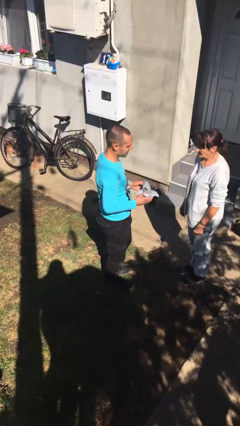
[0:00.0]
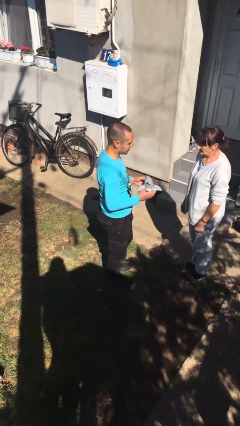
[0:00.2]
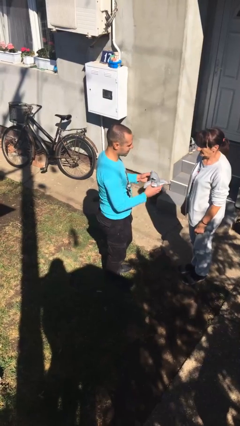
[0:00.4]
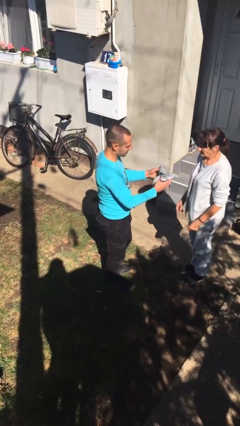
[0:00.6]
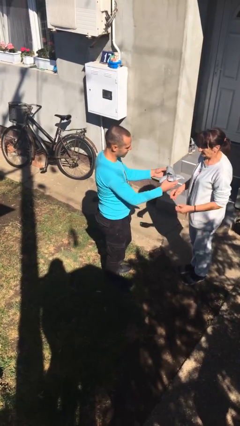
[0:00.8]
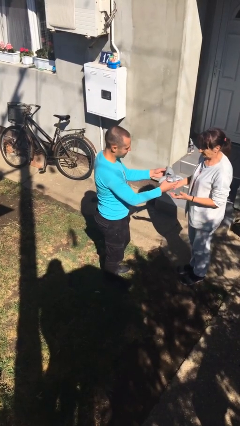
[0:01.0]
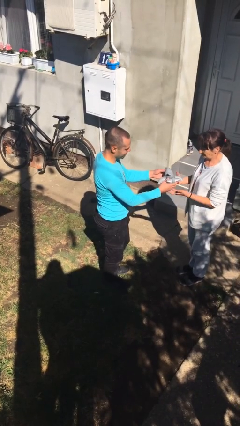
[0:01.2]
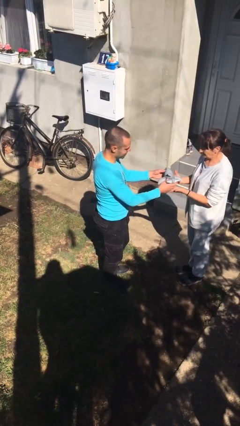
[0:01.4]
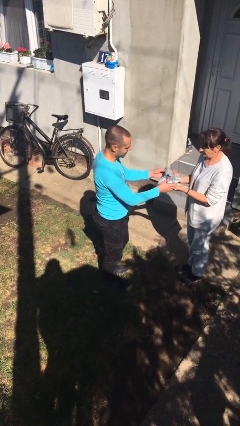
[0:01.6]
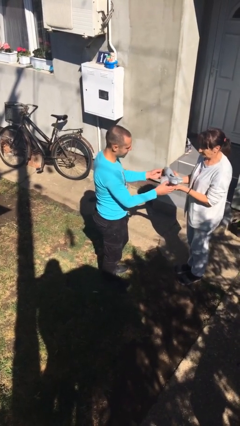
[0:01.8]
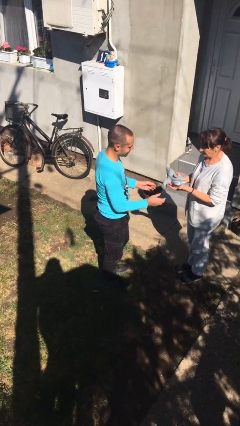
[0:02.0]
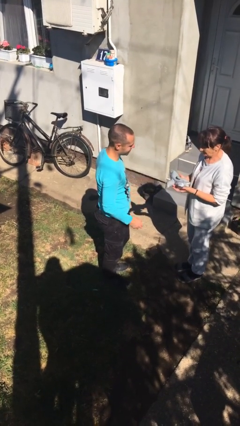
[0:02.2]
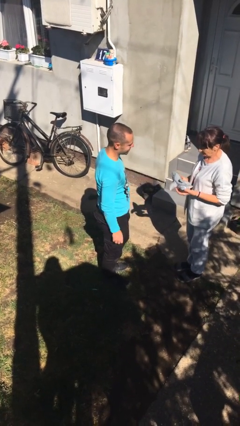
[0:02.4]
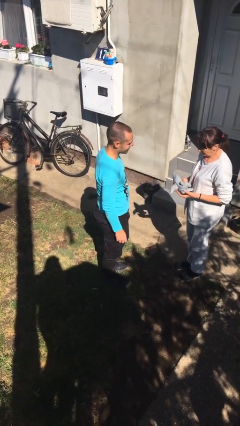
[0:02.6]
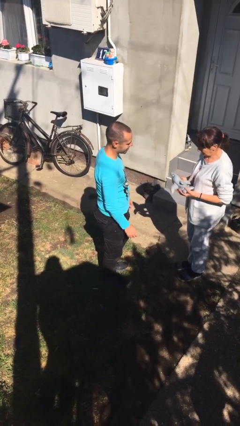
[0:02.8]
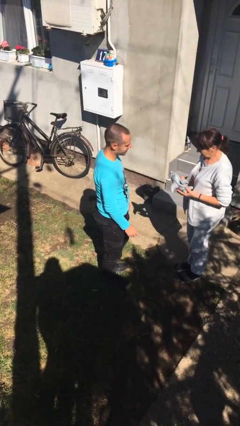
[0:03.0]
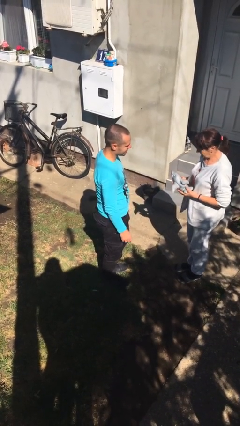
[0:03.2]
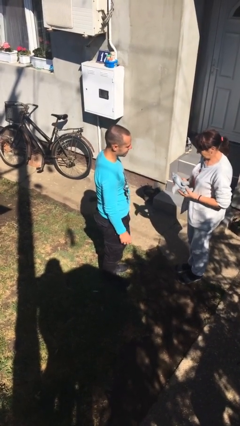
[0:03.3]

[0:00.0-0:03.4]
person transfers object to person

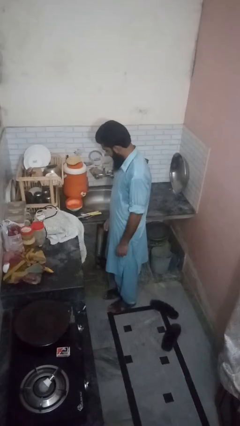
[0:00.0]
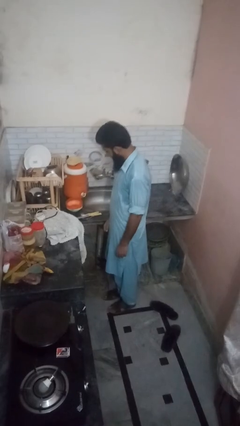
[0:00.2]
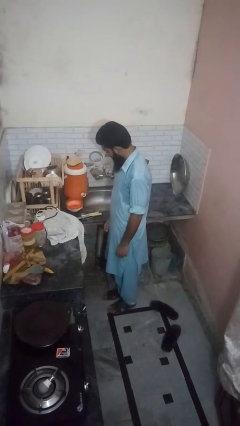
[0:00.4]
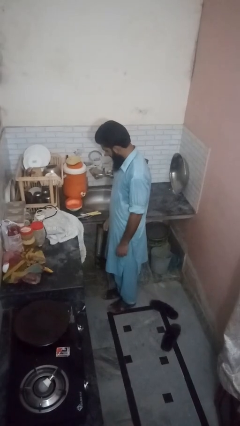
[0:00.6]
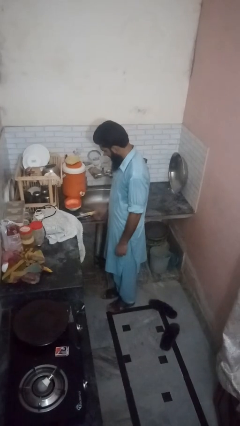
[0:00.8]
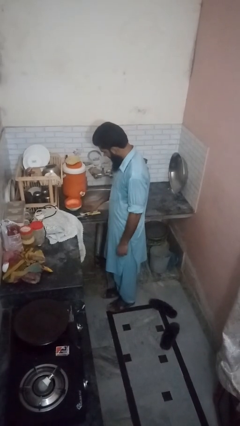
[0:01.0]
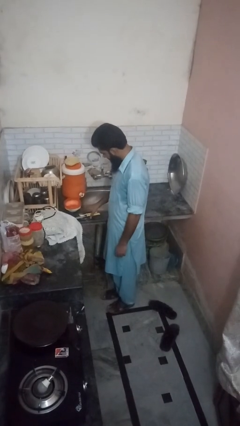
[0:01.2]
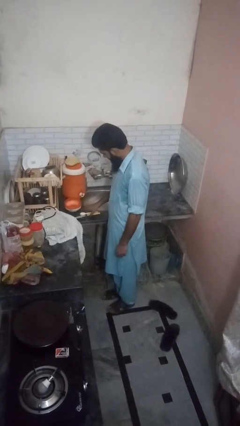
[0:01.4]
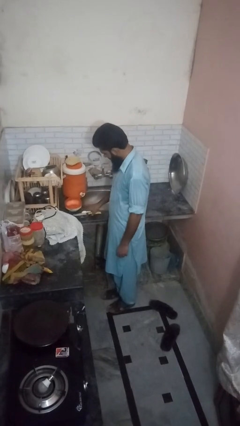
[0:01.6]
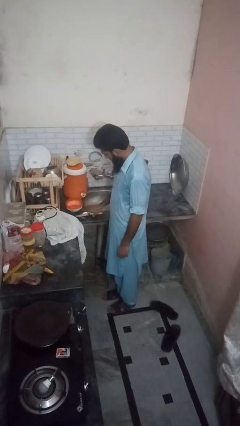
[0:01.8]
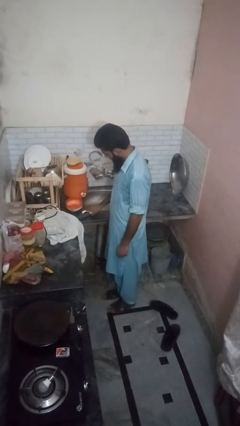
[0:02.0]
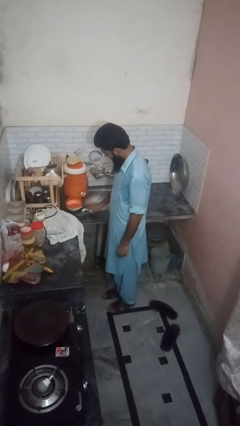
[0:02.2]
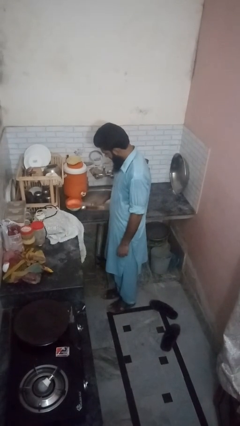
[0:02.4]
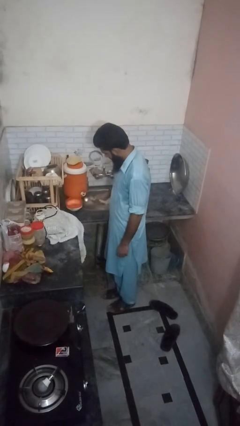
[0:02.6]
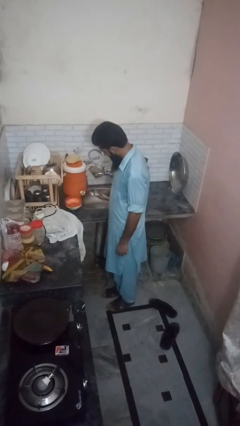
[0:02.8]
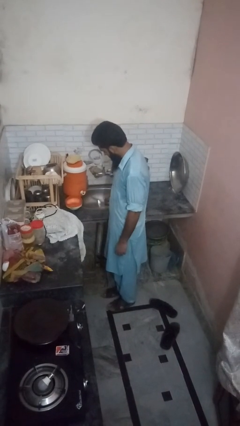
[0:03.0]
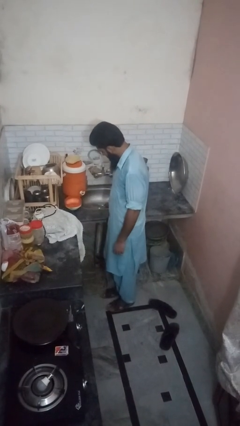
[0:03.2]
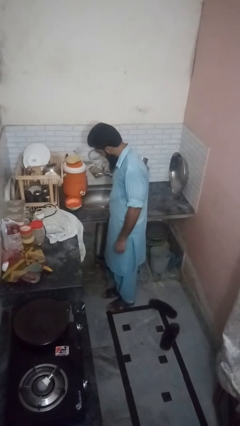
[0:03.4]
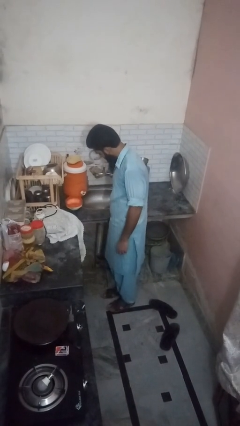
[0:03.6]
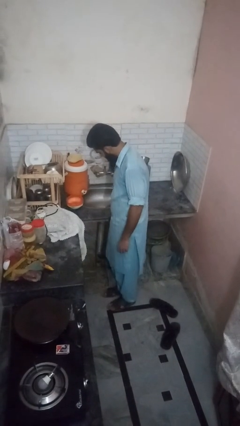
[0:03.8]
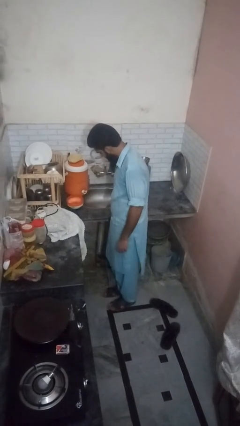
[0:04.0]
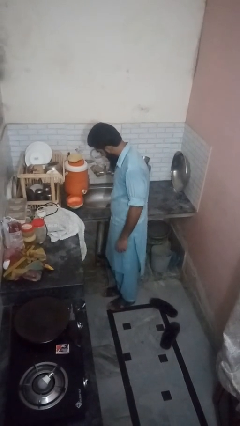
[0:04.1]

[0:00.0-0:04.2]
person loads dishwasher

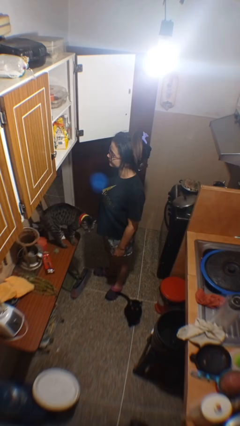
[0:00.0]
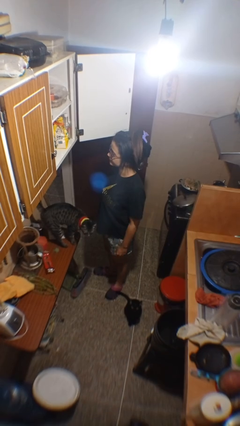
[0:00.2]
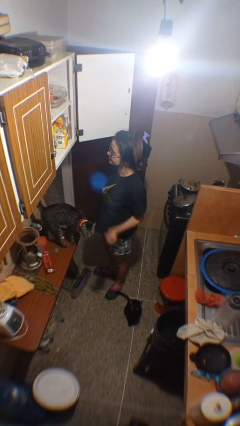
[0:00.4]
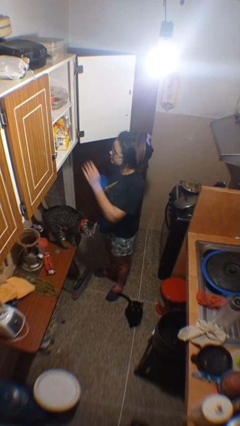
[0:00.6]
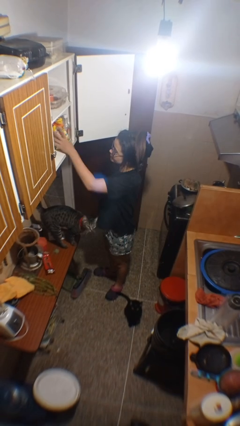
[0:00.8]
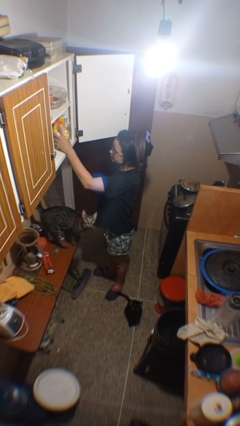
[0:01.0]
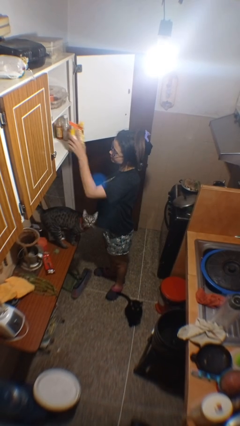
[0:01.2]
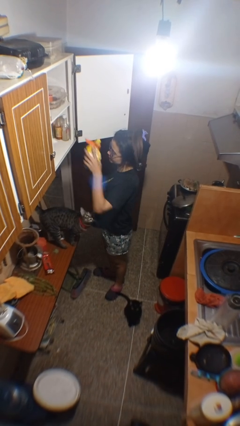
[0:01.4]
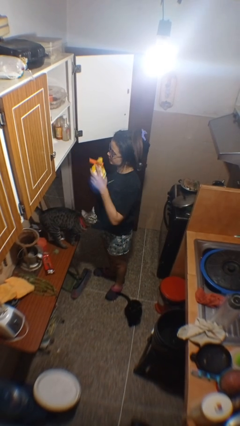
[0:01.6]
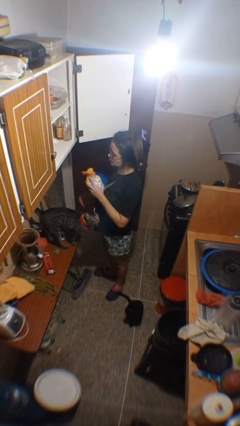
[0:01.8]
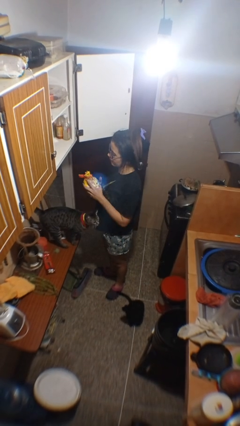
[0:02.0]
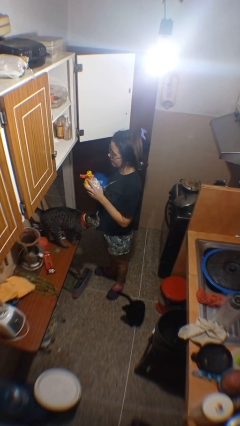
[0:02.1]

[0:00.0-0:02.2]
person picks up object from cabinet

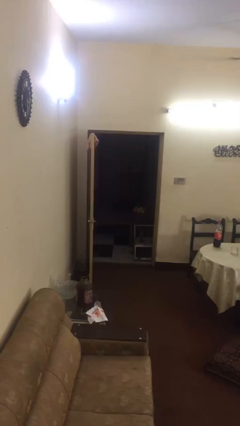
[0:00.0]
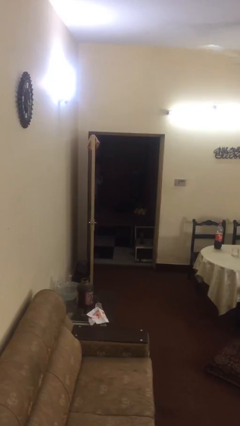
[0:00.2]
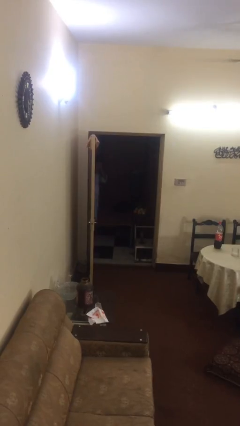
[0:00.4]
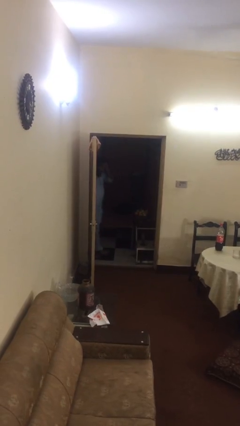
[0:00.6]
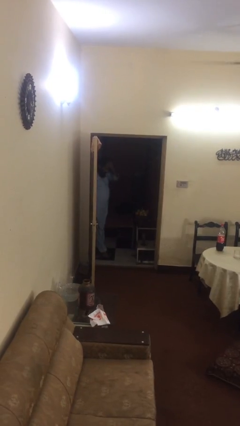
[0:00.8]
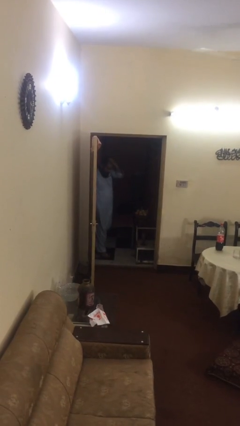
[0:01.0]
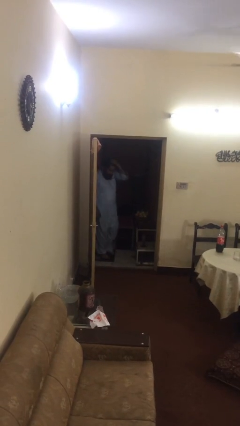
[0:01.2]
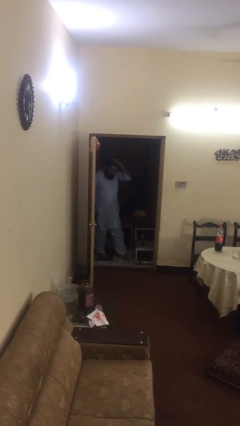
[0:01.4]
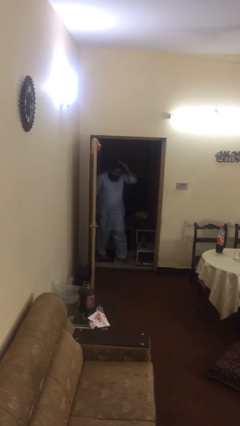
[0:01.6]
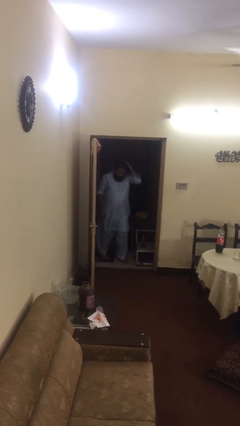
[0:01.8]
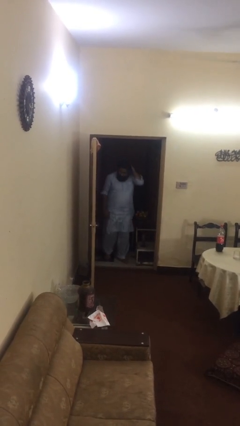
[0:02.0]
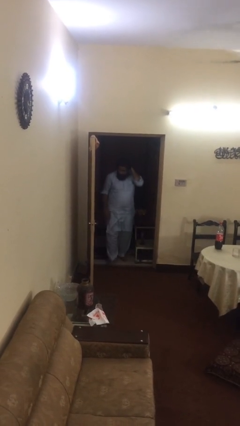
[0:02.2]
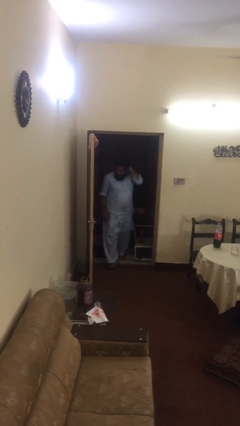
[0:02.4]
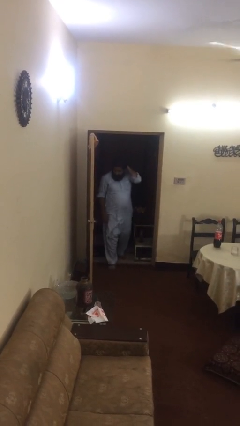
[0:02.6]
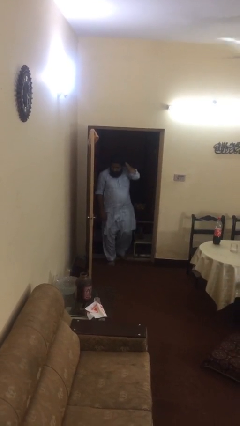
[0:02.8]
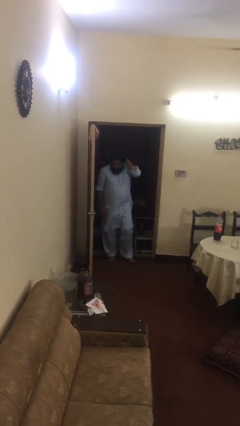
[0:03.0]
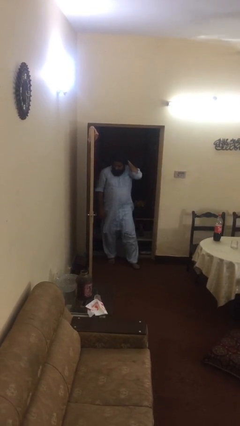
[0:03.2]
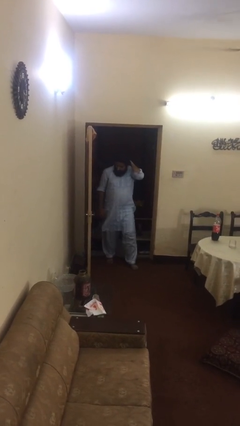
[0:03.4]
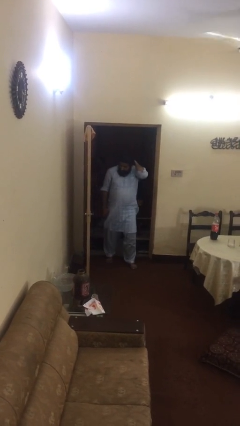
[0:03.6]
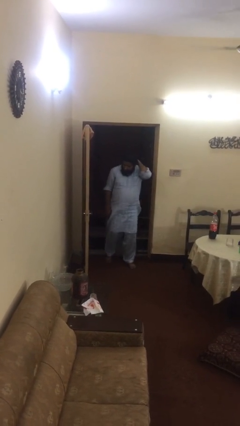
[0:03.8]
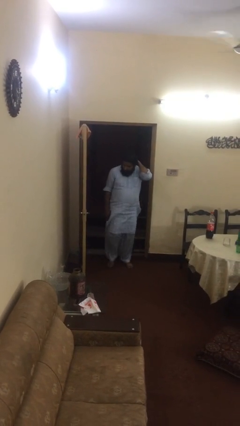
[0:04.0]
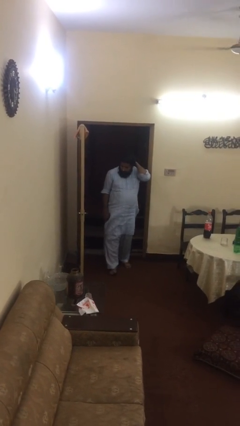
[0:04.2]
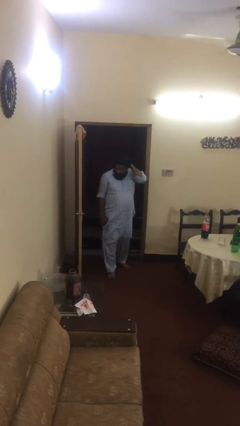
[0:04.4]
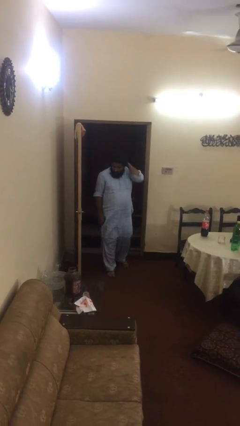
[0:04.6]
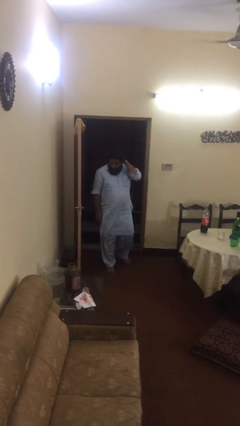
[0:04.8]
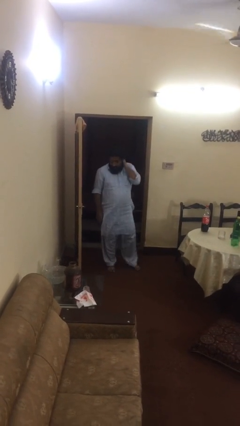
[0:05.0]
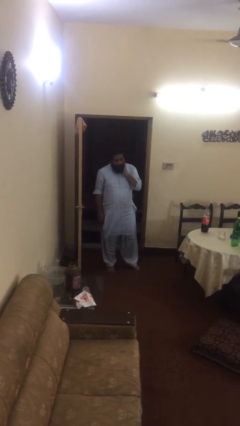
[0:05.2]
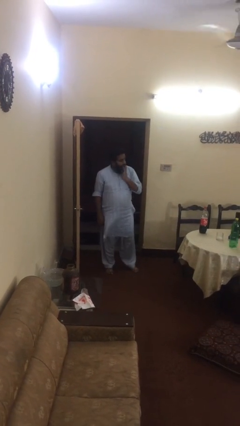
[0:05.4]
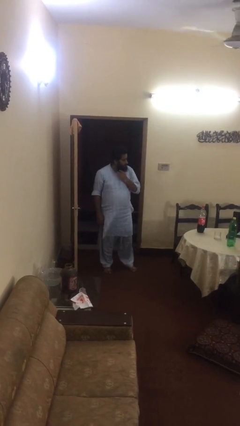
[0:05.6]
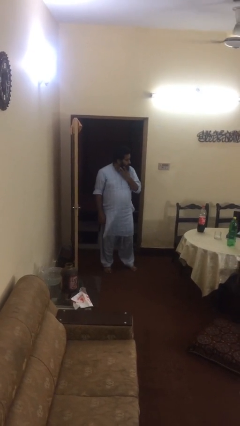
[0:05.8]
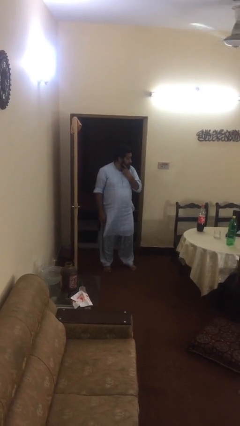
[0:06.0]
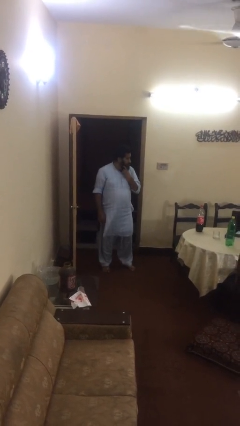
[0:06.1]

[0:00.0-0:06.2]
person enters scene through structure

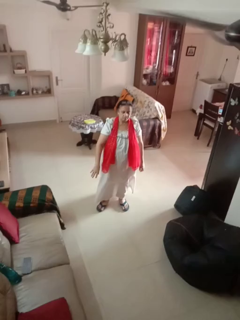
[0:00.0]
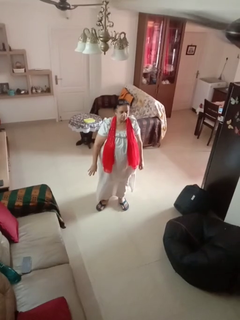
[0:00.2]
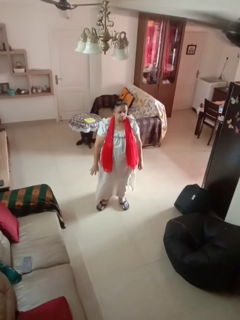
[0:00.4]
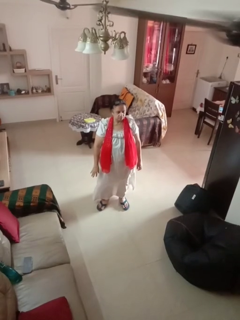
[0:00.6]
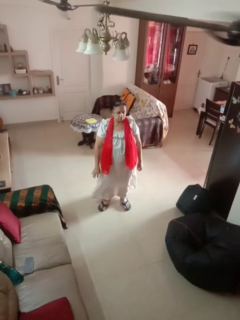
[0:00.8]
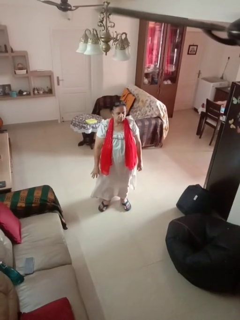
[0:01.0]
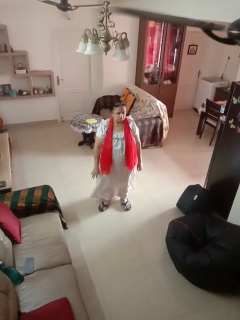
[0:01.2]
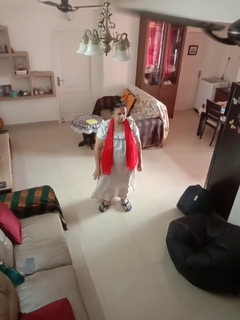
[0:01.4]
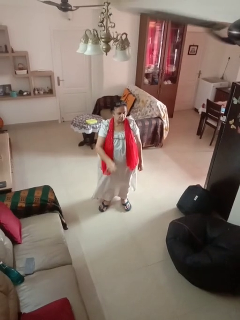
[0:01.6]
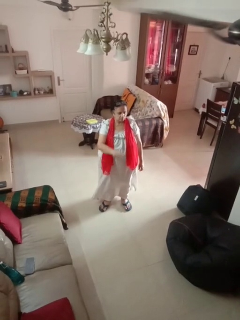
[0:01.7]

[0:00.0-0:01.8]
person gestures lower hand

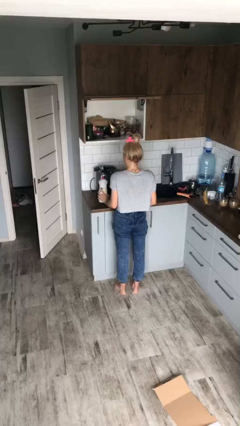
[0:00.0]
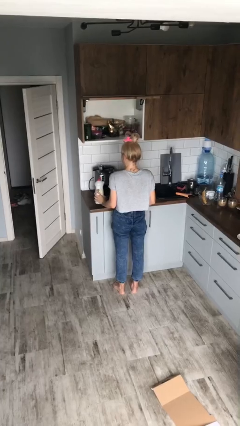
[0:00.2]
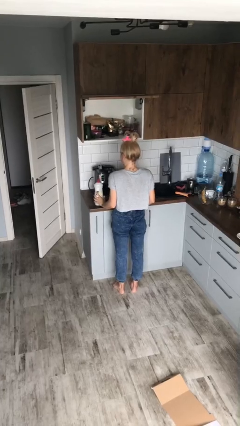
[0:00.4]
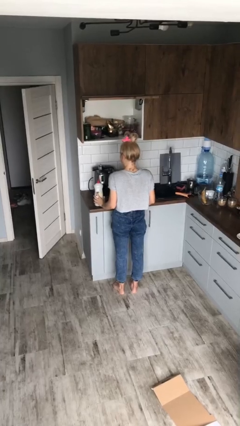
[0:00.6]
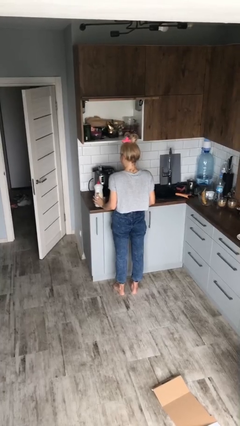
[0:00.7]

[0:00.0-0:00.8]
person puts down object on table
